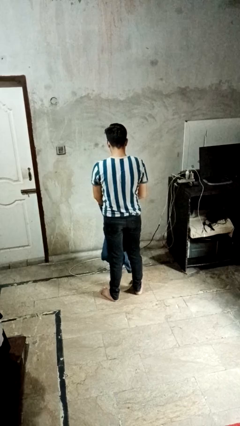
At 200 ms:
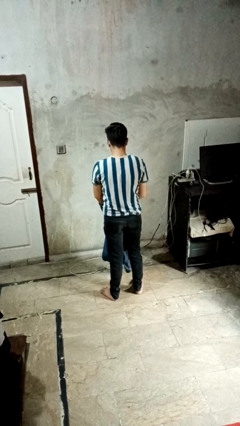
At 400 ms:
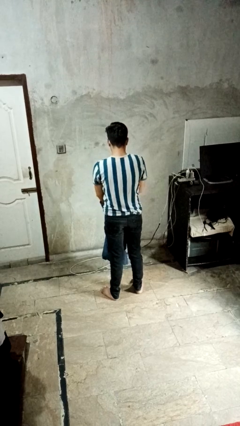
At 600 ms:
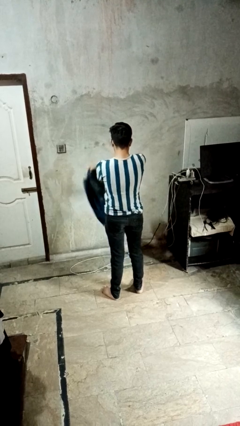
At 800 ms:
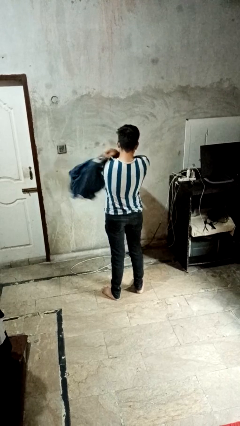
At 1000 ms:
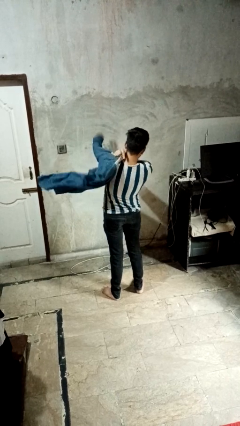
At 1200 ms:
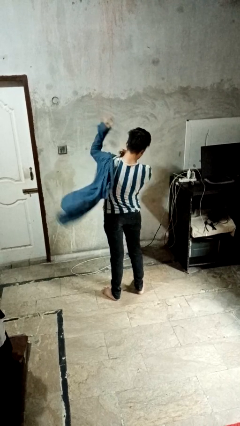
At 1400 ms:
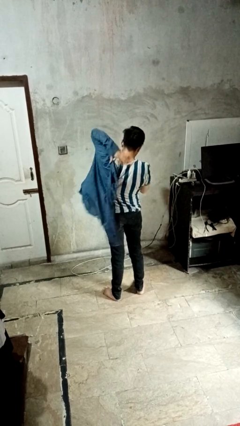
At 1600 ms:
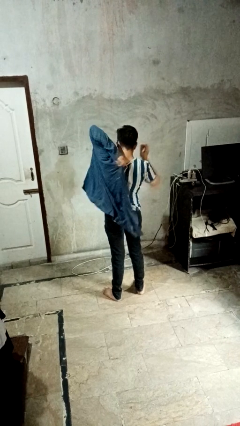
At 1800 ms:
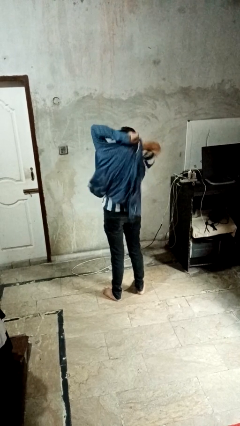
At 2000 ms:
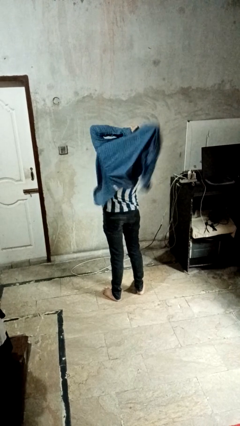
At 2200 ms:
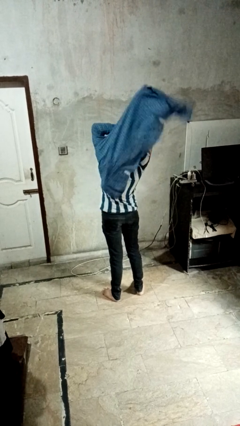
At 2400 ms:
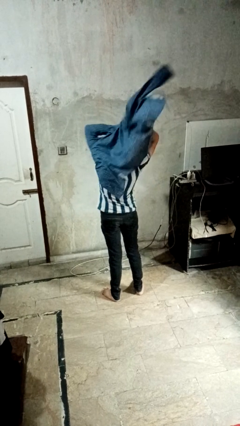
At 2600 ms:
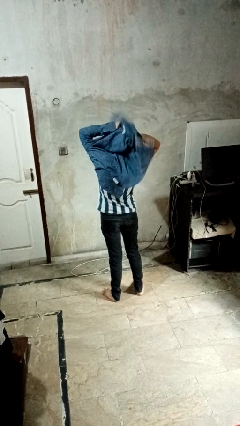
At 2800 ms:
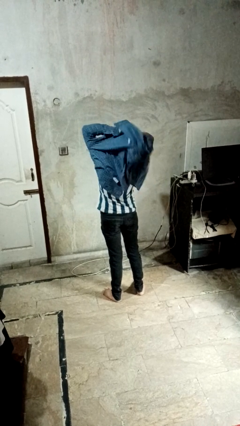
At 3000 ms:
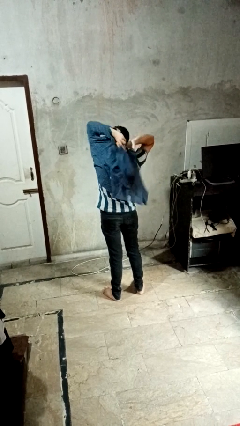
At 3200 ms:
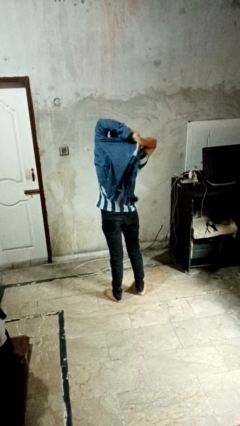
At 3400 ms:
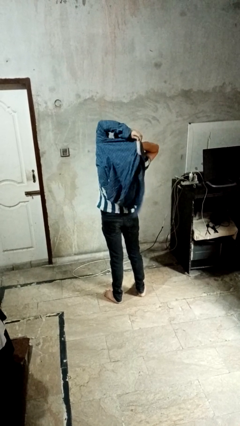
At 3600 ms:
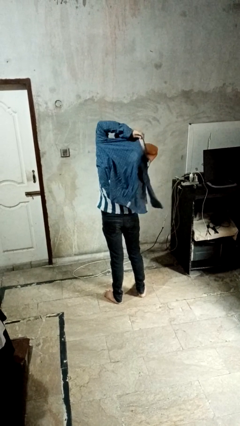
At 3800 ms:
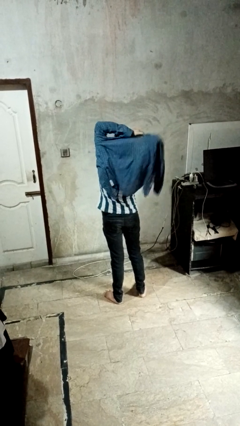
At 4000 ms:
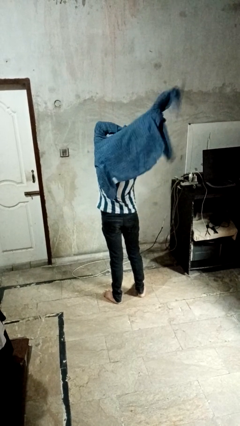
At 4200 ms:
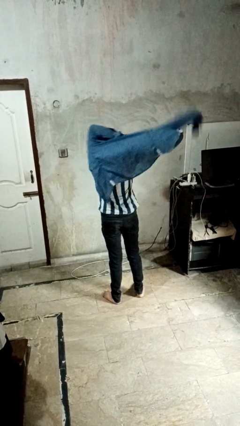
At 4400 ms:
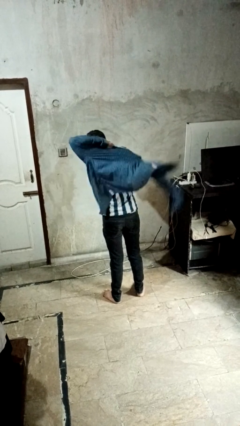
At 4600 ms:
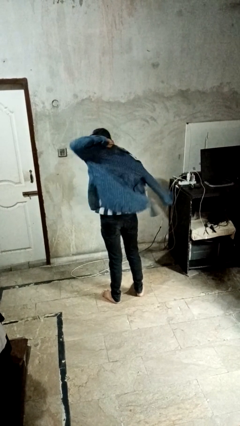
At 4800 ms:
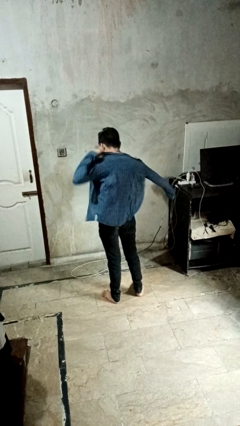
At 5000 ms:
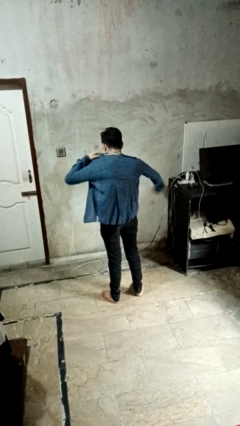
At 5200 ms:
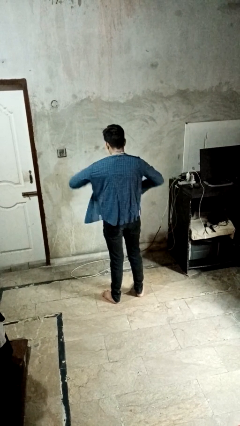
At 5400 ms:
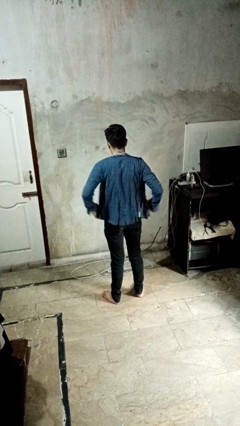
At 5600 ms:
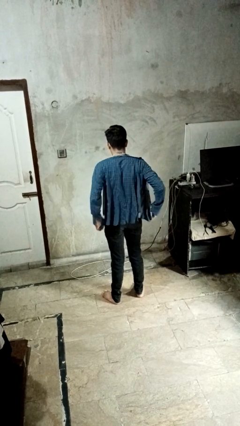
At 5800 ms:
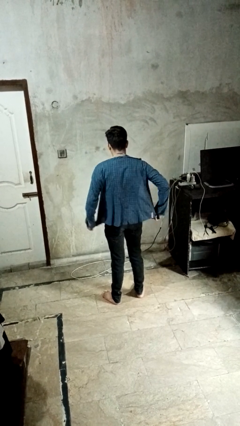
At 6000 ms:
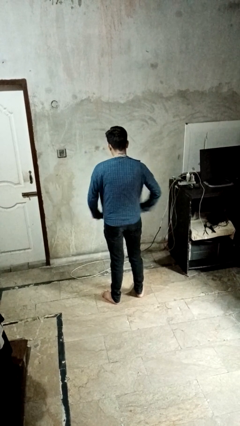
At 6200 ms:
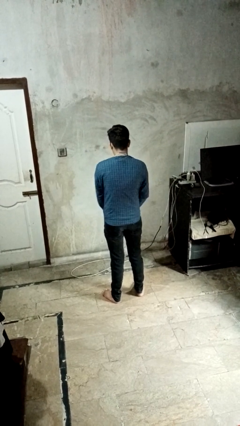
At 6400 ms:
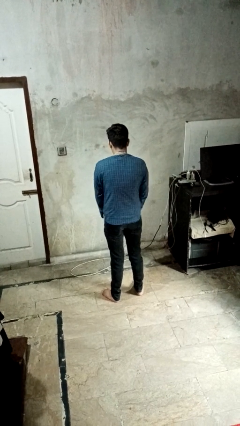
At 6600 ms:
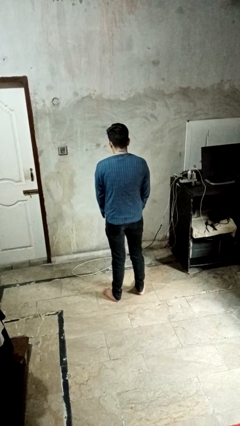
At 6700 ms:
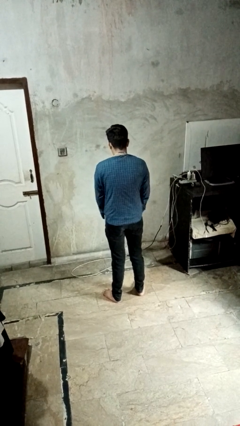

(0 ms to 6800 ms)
person puts on shirt

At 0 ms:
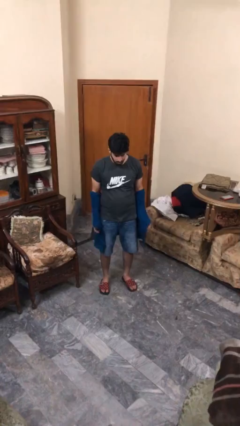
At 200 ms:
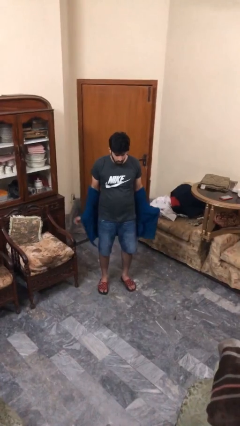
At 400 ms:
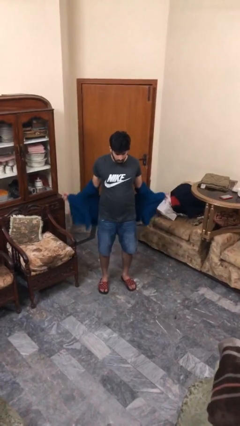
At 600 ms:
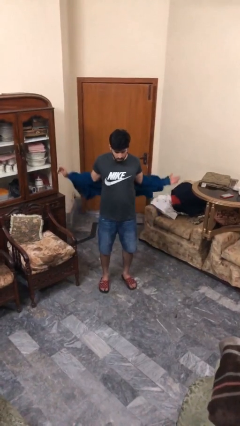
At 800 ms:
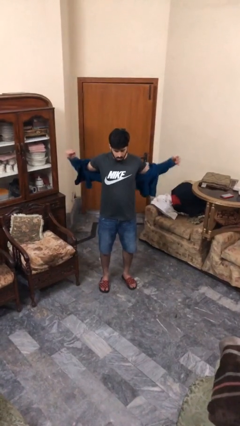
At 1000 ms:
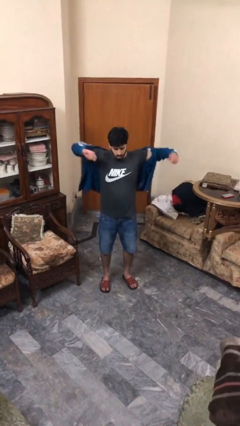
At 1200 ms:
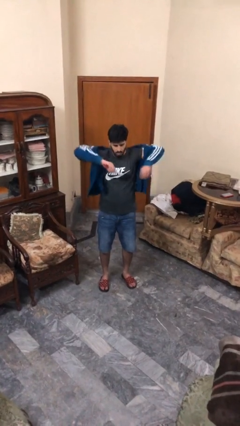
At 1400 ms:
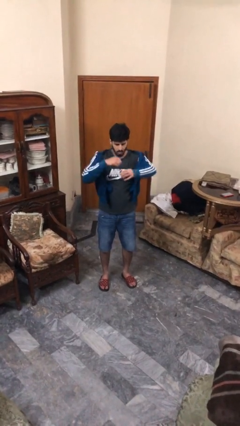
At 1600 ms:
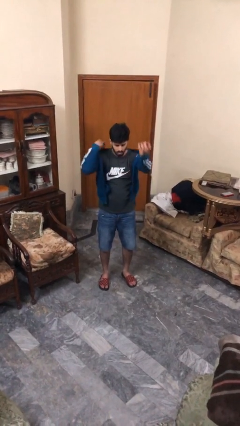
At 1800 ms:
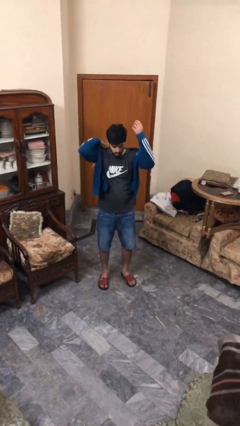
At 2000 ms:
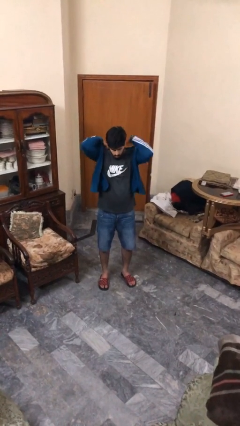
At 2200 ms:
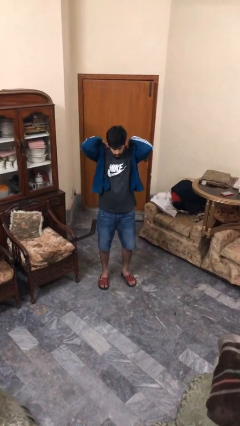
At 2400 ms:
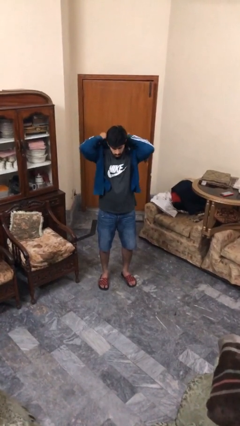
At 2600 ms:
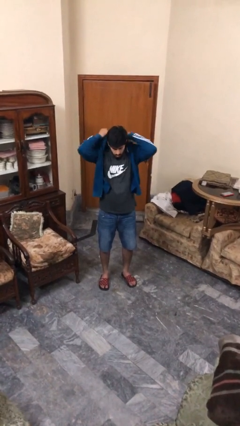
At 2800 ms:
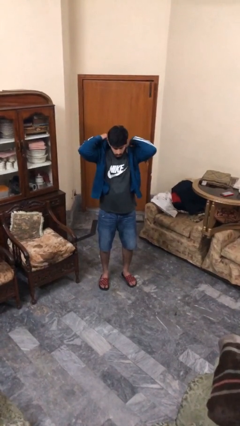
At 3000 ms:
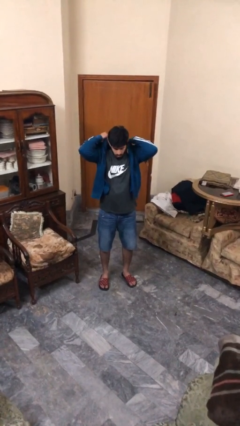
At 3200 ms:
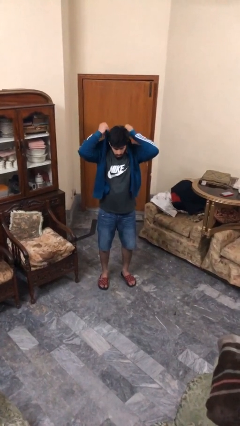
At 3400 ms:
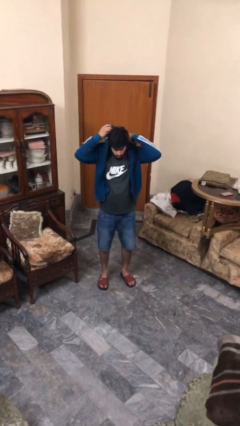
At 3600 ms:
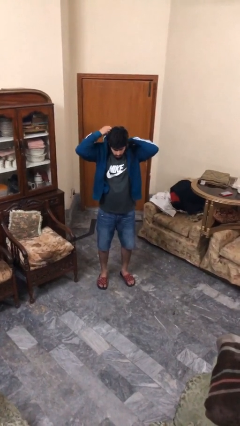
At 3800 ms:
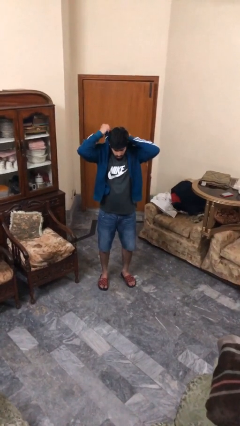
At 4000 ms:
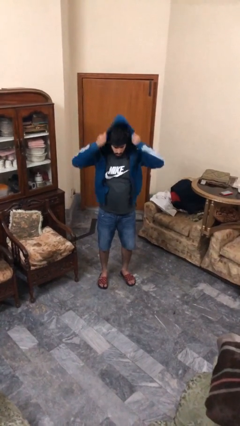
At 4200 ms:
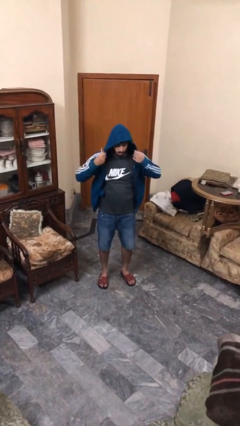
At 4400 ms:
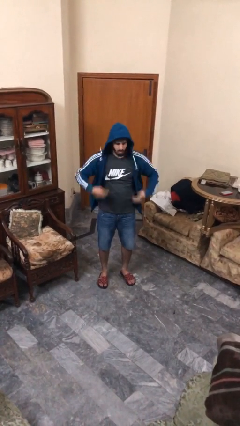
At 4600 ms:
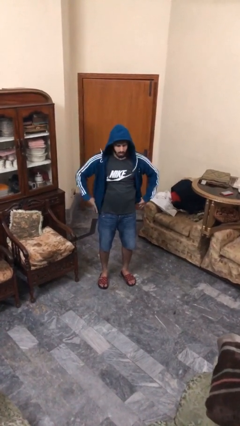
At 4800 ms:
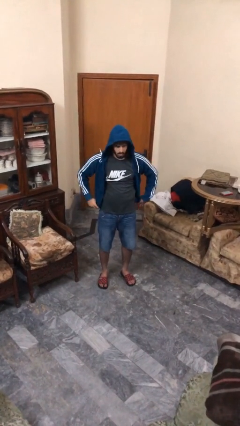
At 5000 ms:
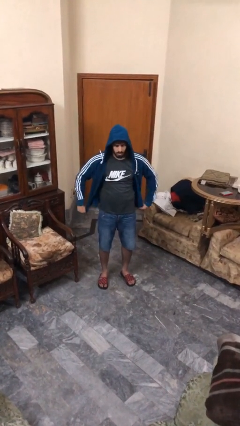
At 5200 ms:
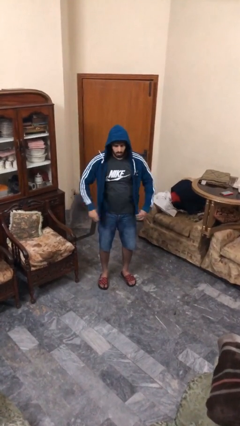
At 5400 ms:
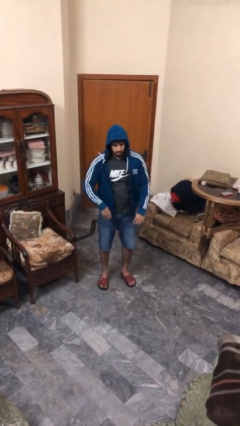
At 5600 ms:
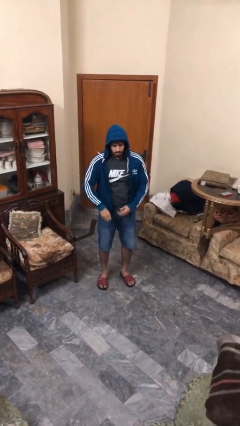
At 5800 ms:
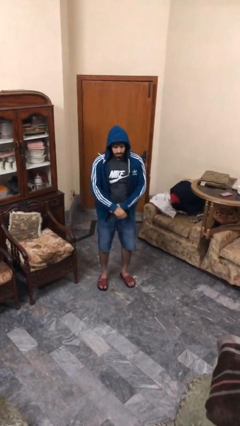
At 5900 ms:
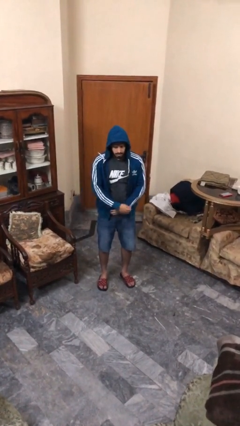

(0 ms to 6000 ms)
person puts on hoodie

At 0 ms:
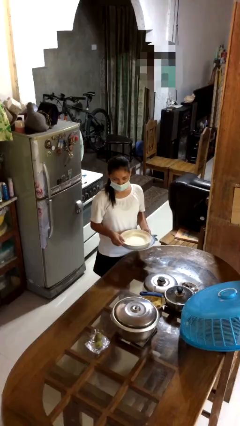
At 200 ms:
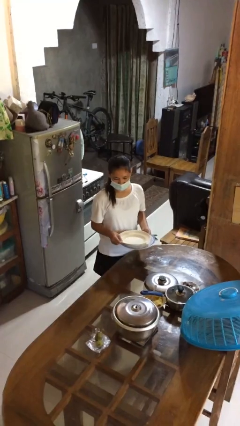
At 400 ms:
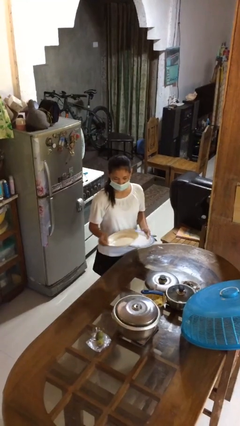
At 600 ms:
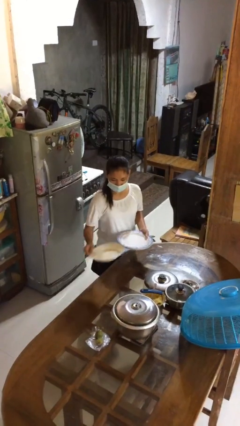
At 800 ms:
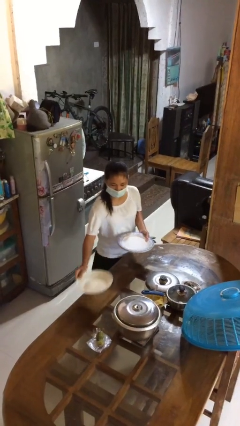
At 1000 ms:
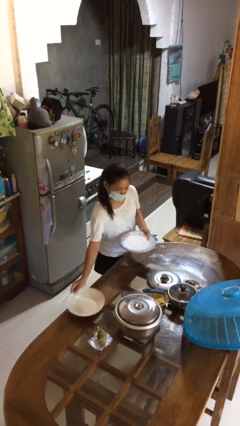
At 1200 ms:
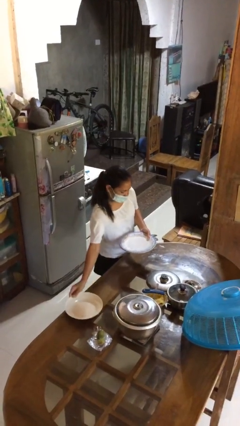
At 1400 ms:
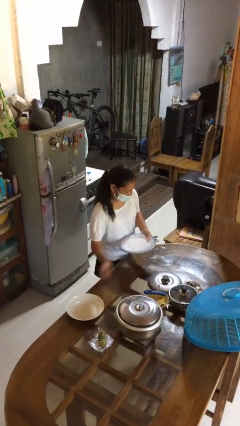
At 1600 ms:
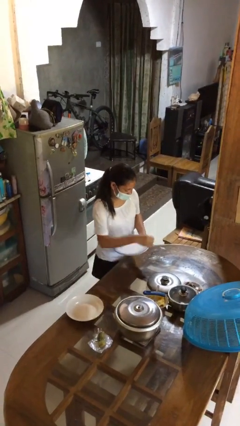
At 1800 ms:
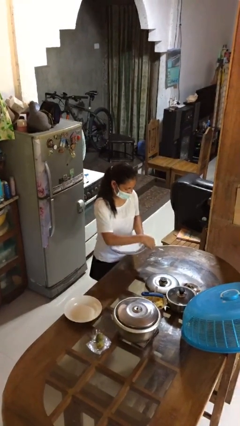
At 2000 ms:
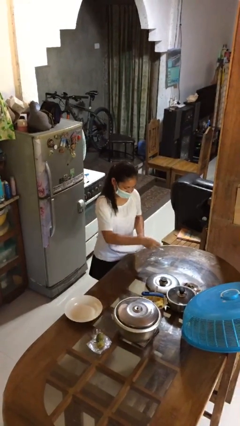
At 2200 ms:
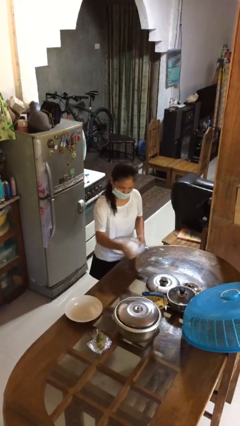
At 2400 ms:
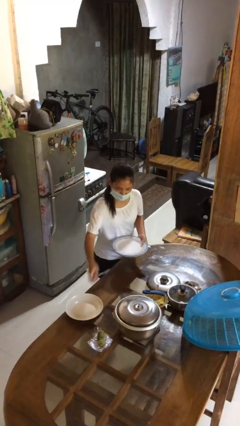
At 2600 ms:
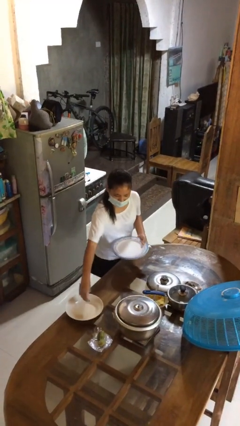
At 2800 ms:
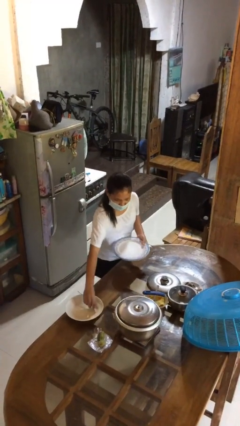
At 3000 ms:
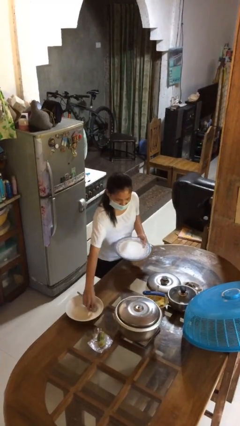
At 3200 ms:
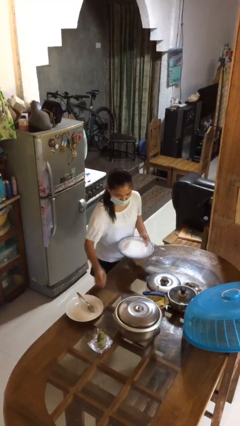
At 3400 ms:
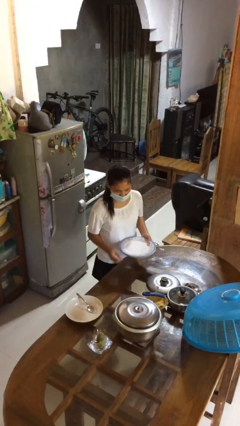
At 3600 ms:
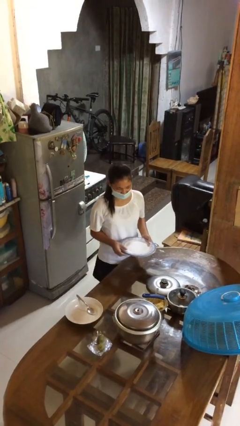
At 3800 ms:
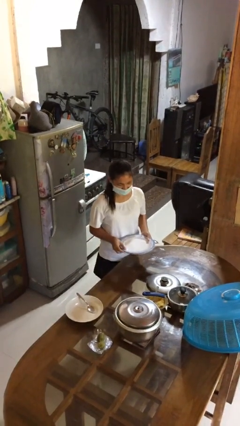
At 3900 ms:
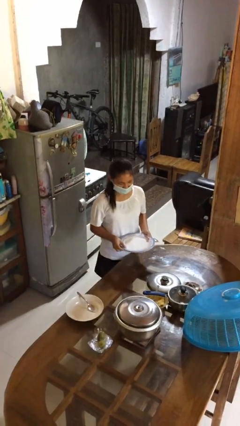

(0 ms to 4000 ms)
person sets table

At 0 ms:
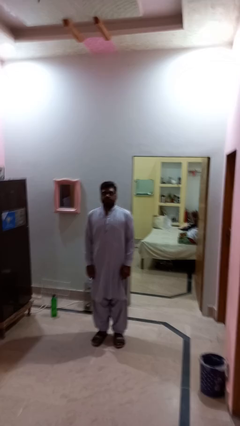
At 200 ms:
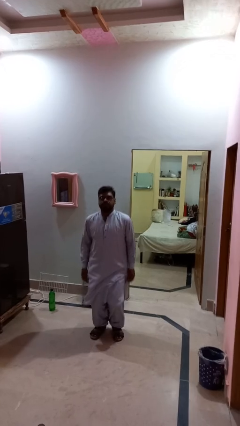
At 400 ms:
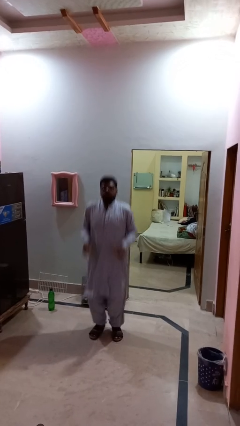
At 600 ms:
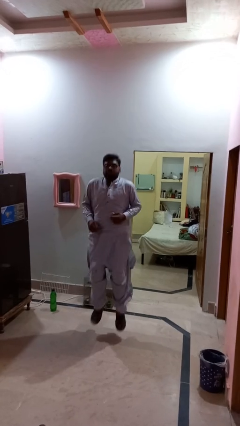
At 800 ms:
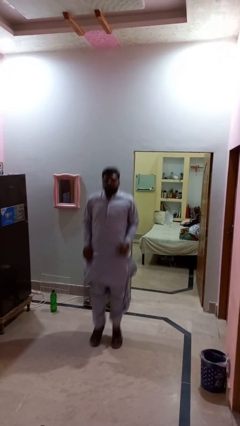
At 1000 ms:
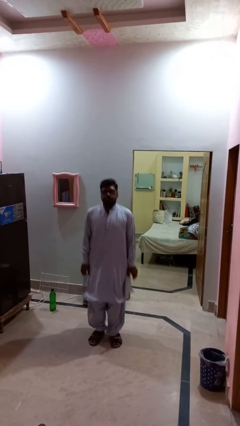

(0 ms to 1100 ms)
person jumps

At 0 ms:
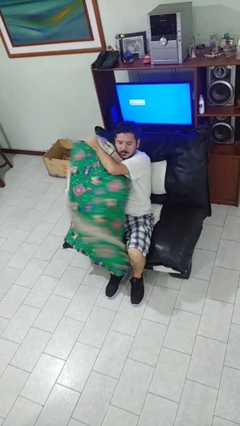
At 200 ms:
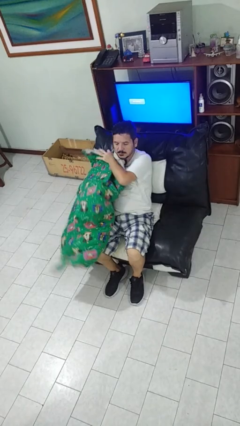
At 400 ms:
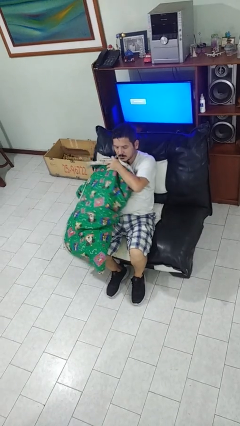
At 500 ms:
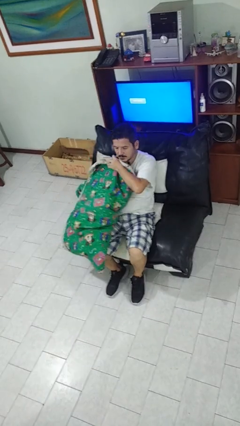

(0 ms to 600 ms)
person uncovers with blanket
